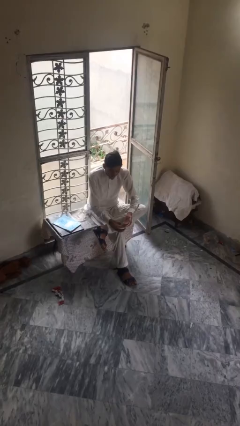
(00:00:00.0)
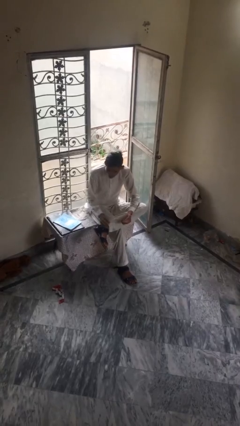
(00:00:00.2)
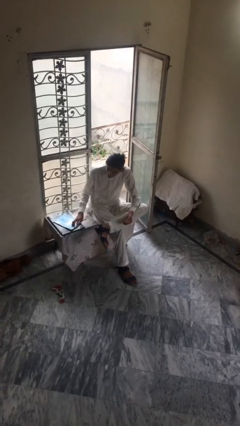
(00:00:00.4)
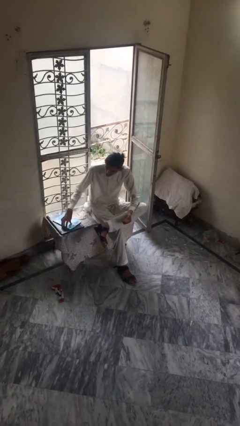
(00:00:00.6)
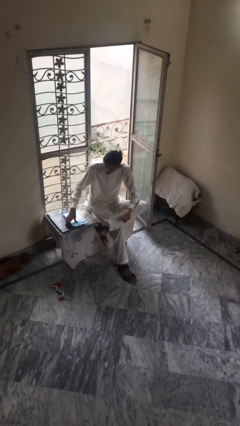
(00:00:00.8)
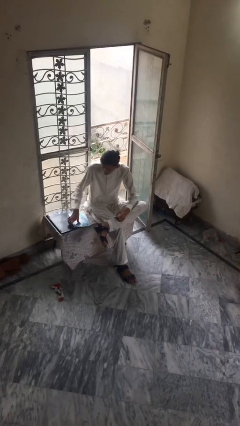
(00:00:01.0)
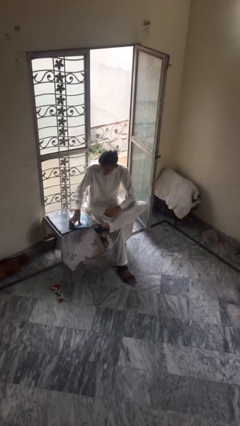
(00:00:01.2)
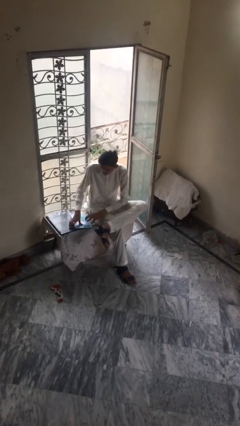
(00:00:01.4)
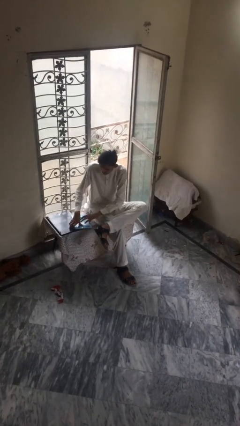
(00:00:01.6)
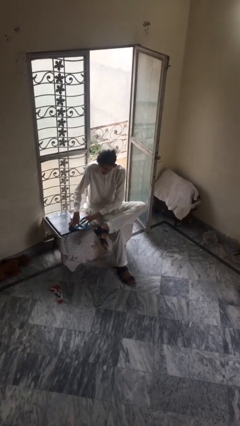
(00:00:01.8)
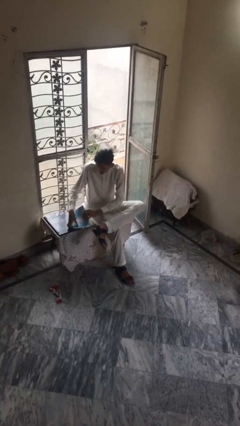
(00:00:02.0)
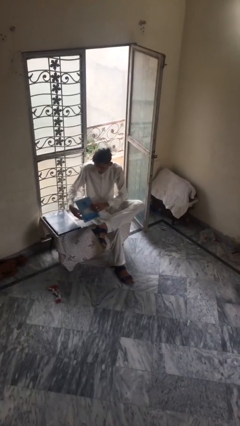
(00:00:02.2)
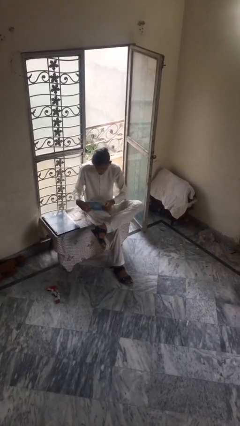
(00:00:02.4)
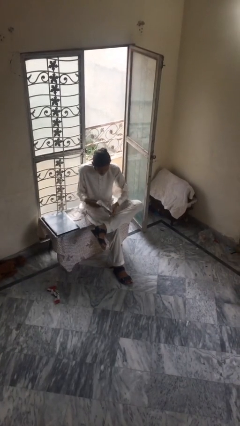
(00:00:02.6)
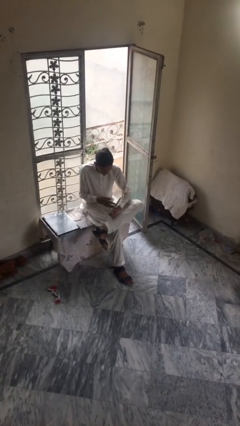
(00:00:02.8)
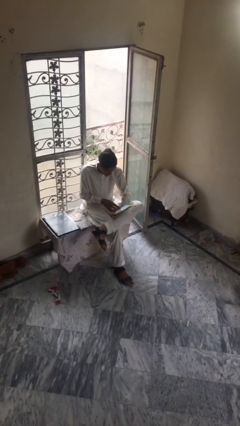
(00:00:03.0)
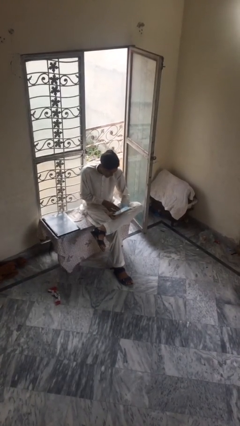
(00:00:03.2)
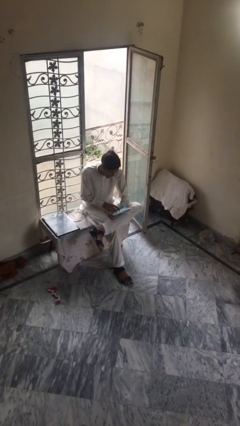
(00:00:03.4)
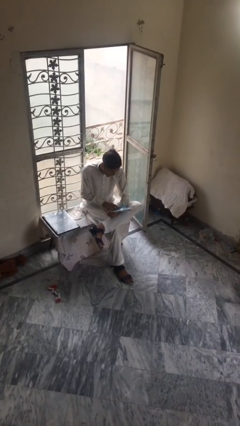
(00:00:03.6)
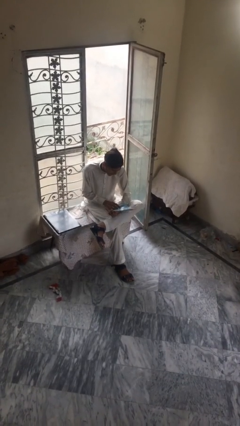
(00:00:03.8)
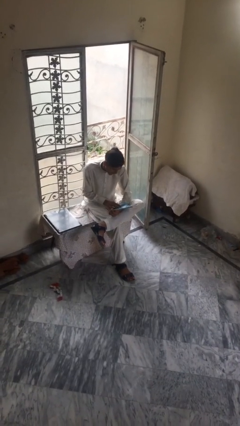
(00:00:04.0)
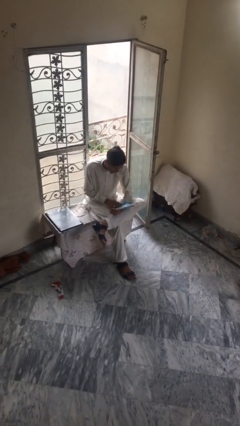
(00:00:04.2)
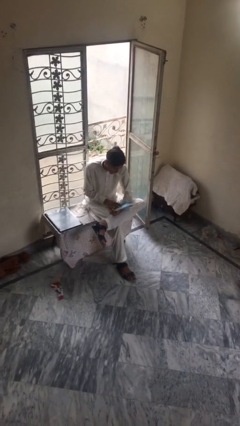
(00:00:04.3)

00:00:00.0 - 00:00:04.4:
person picks up object from table

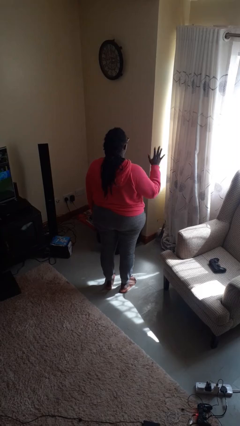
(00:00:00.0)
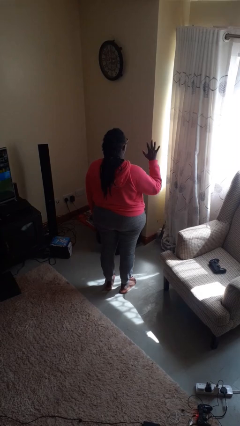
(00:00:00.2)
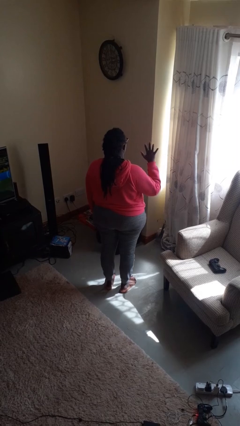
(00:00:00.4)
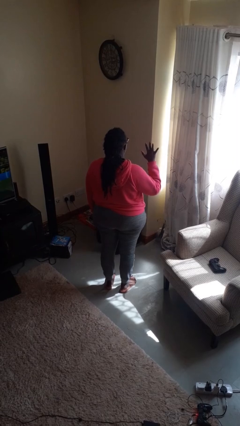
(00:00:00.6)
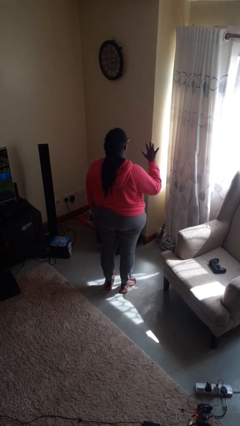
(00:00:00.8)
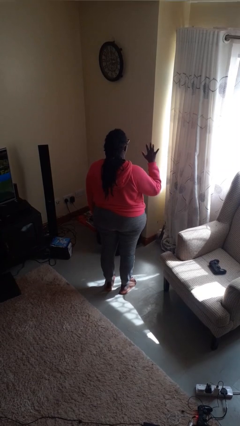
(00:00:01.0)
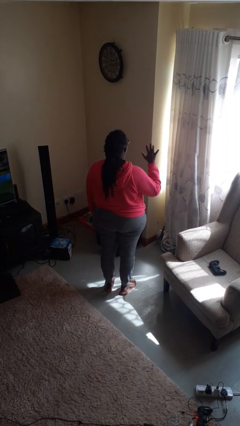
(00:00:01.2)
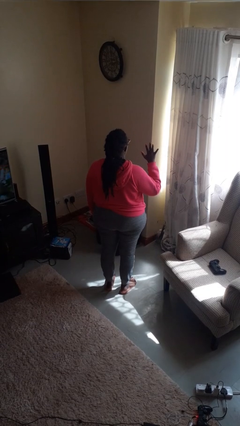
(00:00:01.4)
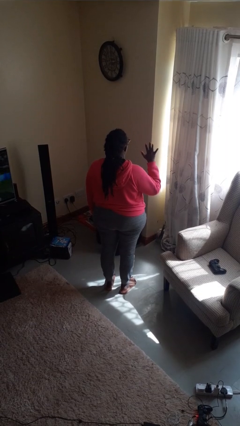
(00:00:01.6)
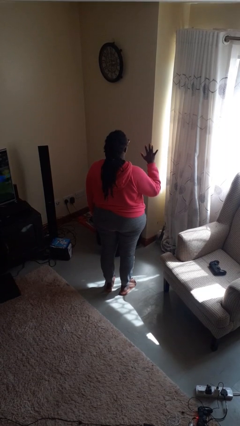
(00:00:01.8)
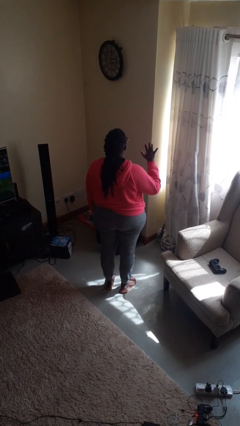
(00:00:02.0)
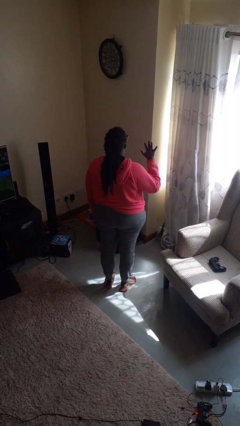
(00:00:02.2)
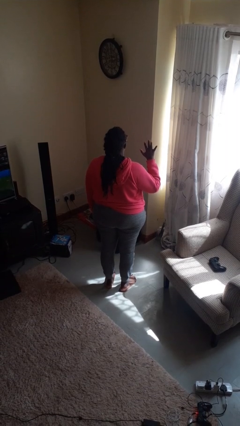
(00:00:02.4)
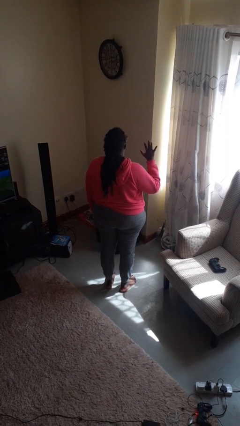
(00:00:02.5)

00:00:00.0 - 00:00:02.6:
person gestures number five

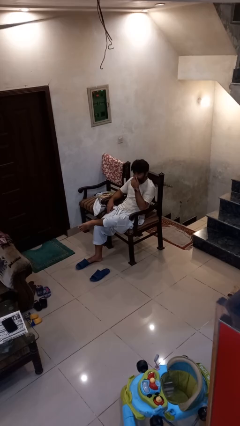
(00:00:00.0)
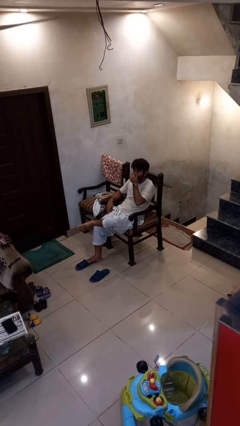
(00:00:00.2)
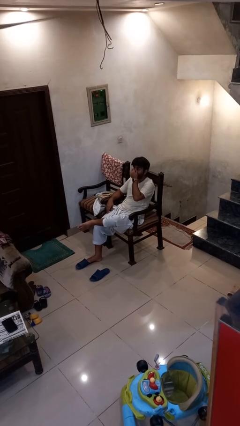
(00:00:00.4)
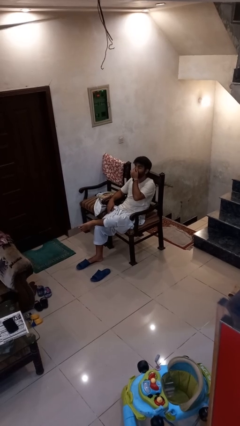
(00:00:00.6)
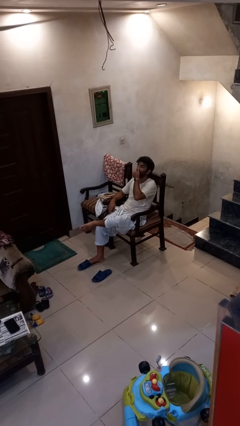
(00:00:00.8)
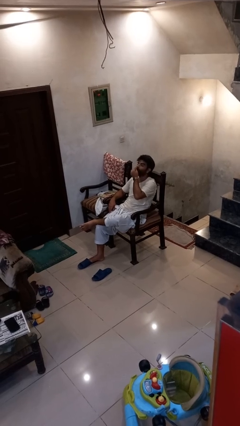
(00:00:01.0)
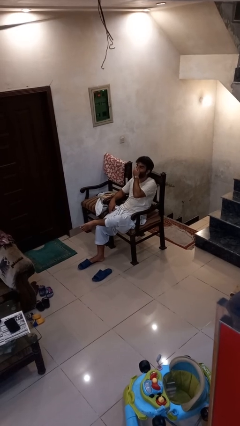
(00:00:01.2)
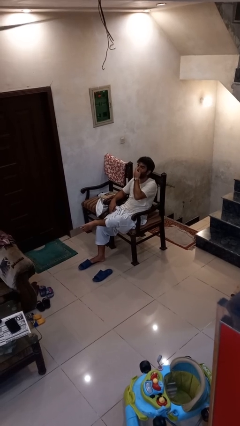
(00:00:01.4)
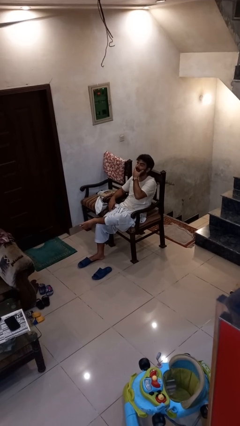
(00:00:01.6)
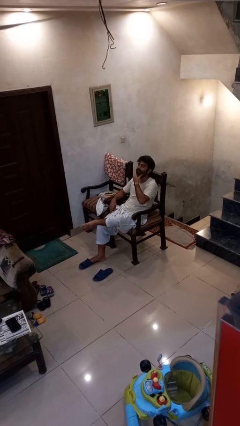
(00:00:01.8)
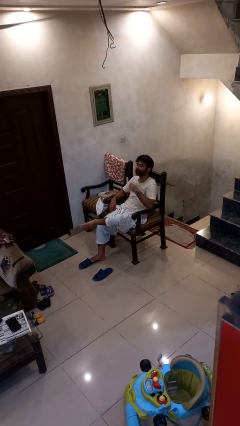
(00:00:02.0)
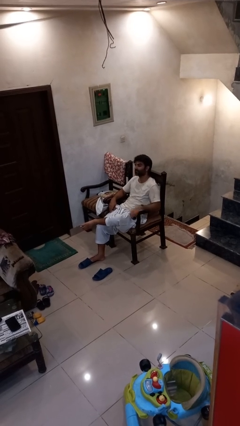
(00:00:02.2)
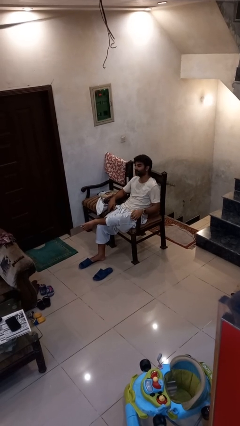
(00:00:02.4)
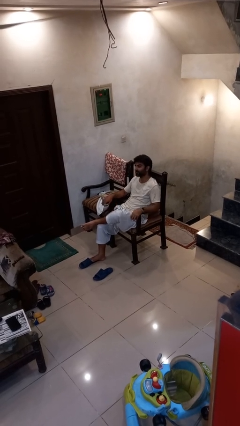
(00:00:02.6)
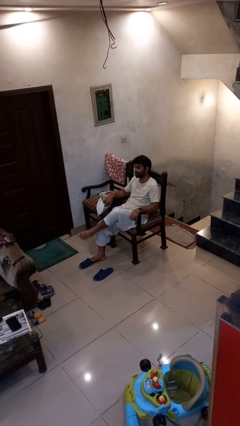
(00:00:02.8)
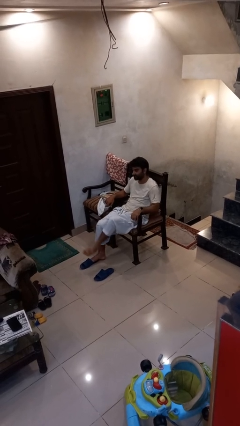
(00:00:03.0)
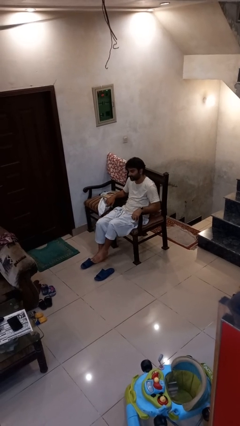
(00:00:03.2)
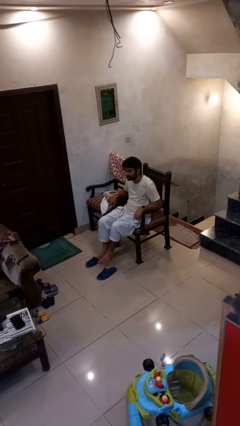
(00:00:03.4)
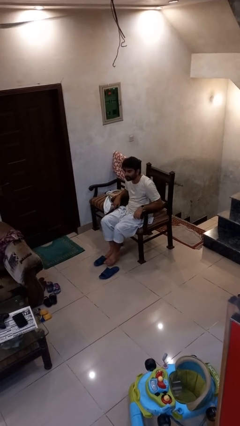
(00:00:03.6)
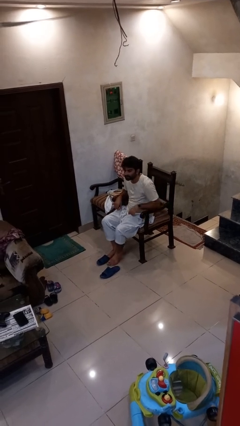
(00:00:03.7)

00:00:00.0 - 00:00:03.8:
person cracks knuckles

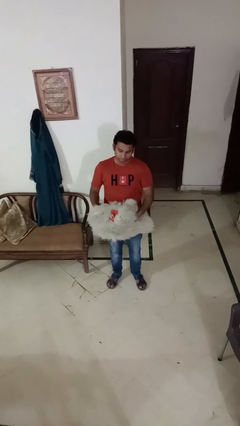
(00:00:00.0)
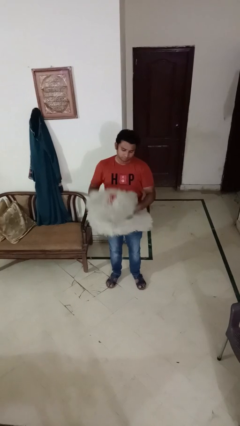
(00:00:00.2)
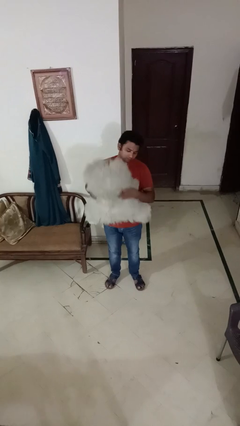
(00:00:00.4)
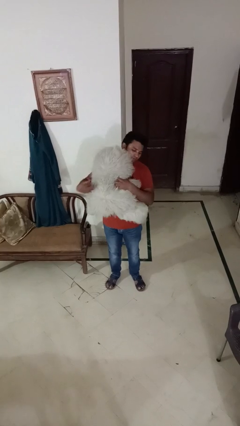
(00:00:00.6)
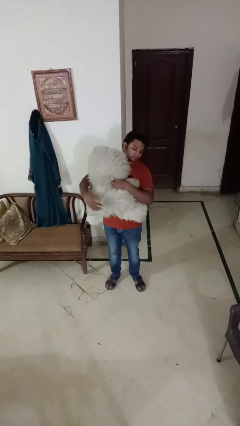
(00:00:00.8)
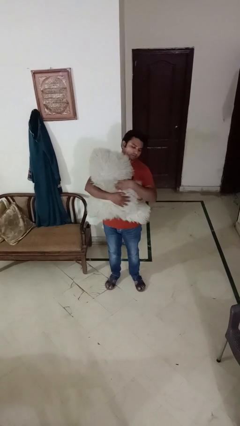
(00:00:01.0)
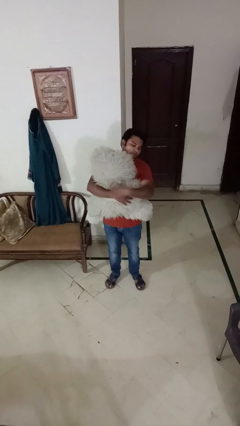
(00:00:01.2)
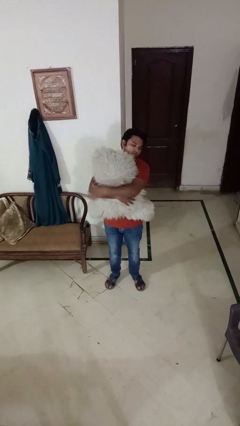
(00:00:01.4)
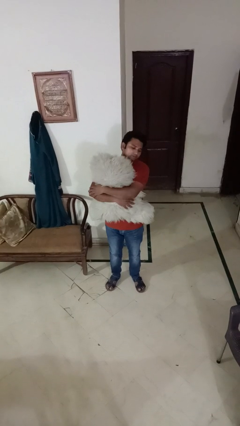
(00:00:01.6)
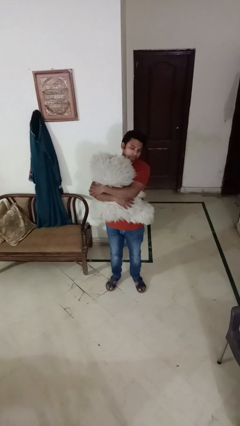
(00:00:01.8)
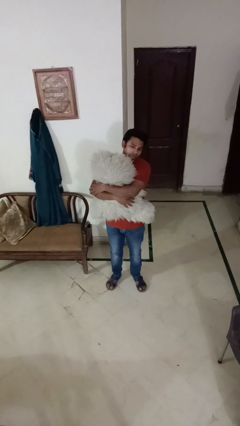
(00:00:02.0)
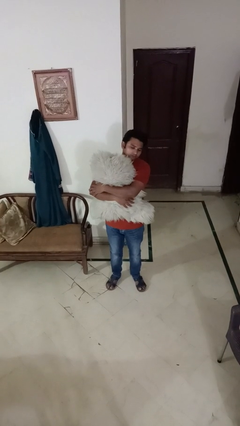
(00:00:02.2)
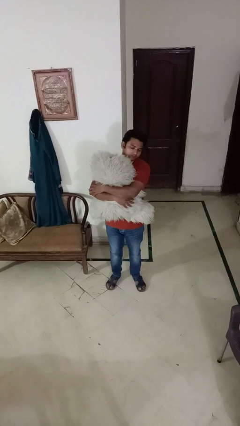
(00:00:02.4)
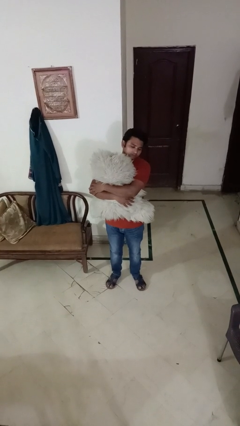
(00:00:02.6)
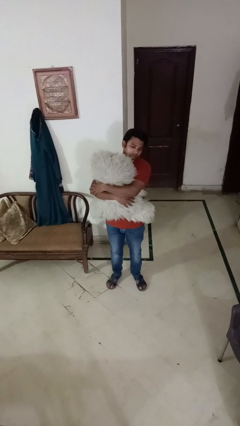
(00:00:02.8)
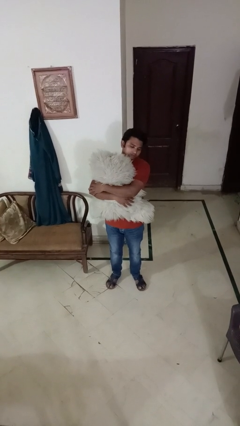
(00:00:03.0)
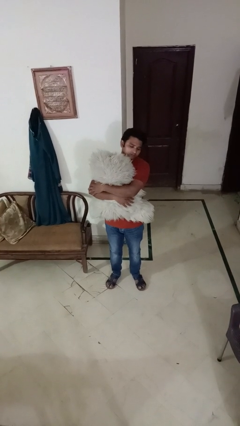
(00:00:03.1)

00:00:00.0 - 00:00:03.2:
person hugs stuffed animal

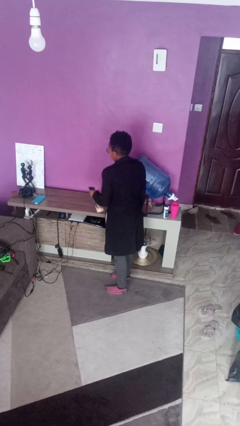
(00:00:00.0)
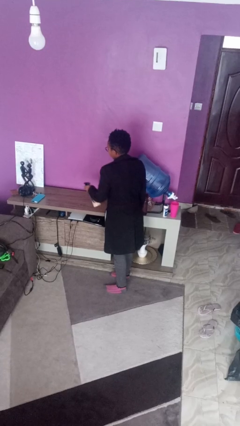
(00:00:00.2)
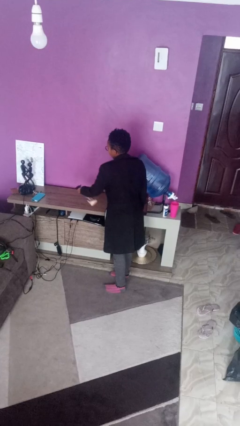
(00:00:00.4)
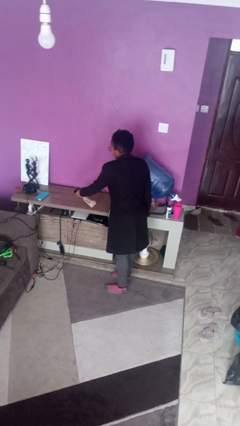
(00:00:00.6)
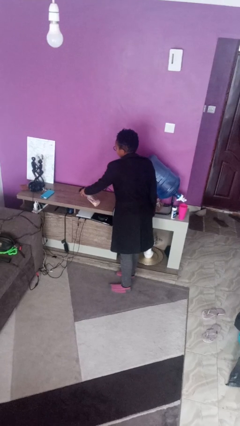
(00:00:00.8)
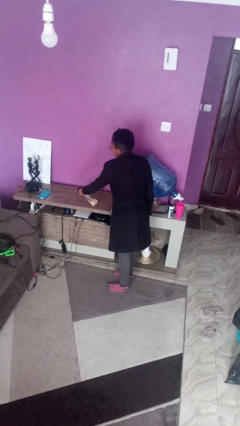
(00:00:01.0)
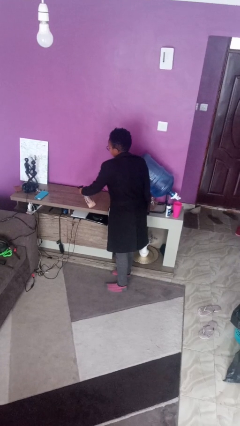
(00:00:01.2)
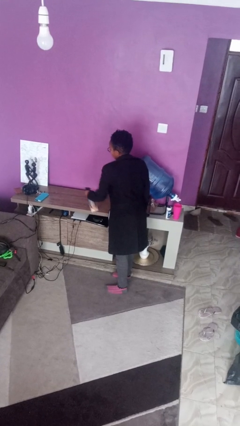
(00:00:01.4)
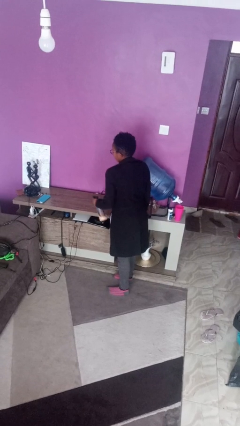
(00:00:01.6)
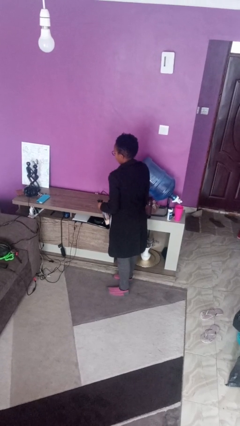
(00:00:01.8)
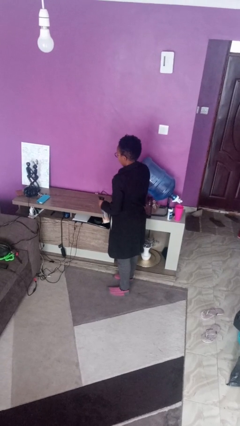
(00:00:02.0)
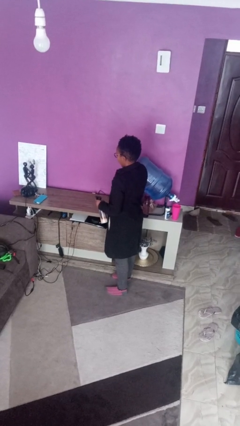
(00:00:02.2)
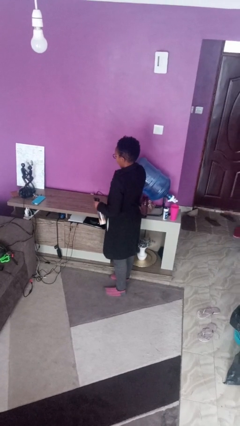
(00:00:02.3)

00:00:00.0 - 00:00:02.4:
person sprays from bottle

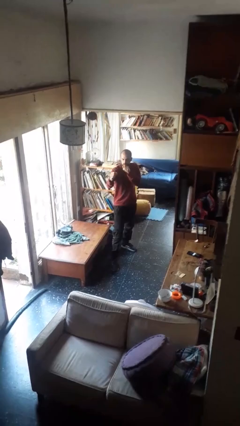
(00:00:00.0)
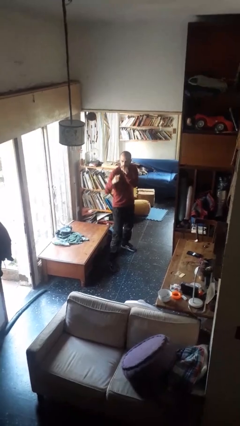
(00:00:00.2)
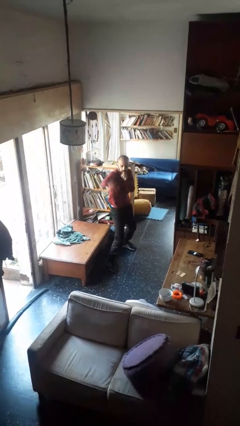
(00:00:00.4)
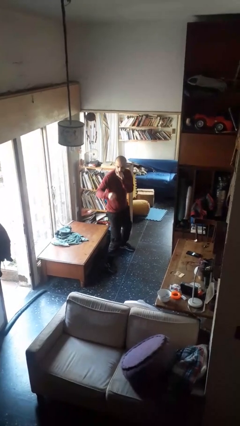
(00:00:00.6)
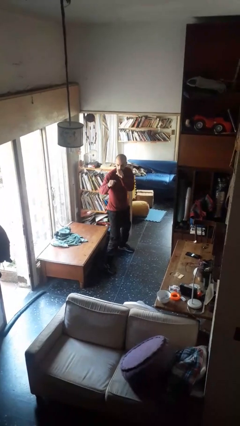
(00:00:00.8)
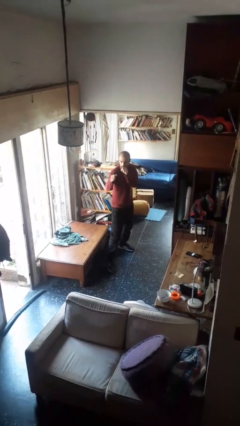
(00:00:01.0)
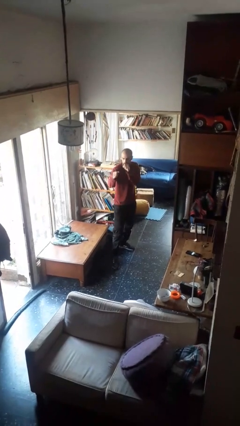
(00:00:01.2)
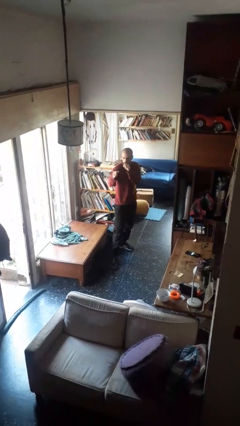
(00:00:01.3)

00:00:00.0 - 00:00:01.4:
person punches
